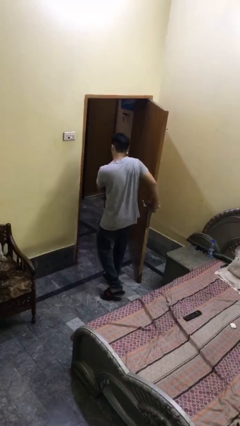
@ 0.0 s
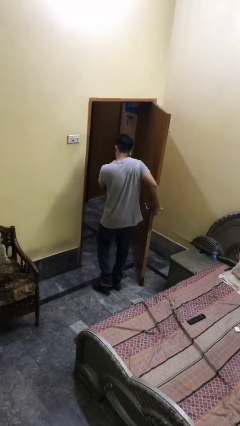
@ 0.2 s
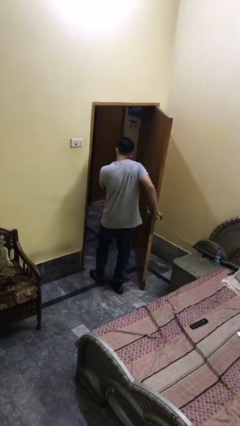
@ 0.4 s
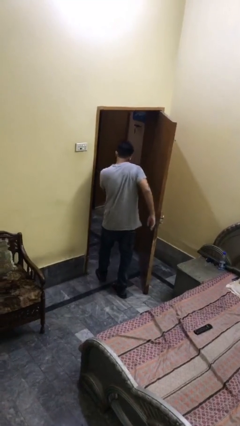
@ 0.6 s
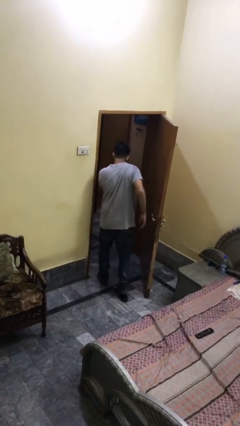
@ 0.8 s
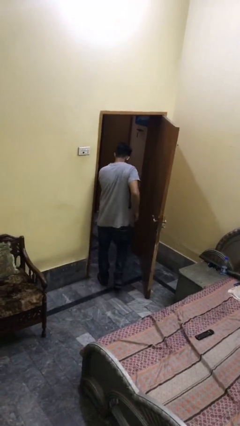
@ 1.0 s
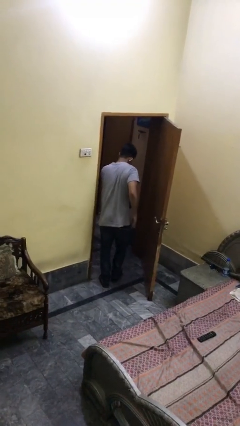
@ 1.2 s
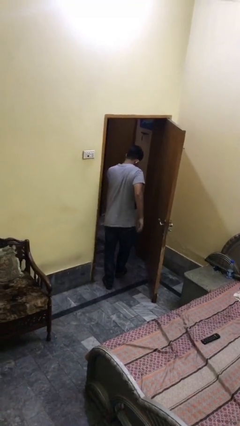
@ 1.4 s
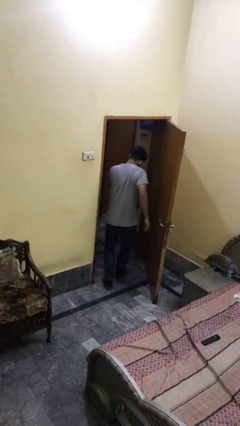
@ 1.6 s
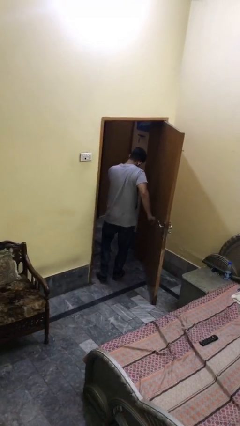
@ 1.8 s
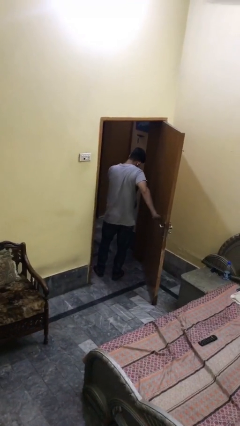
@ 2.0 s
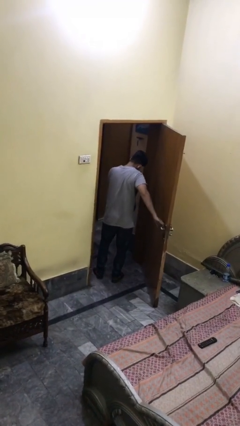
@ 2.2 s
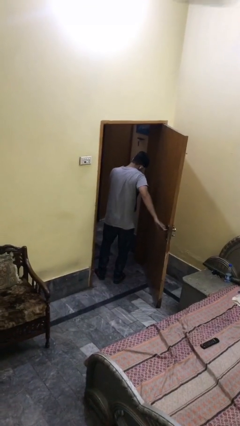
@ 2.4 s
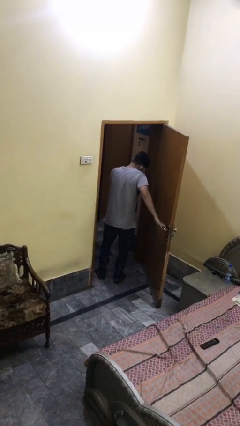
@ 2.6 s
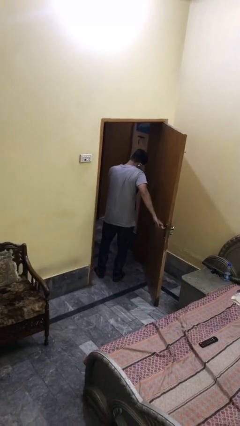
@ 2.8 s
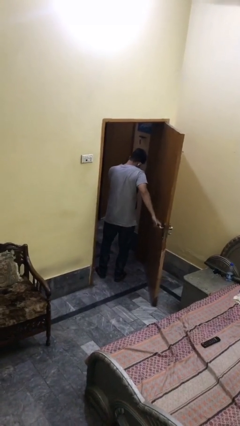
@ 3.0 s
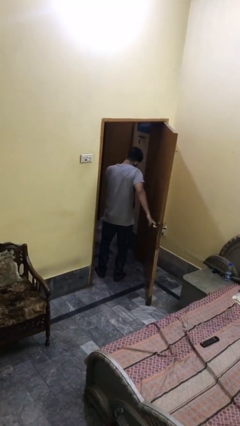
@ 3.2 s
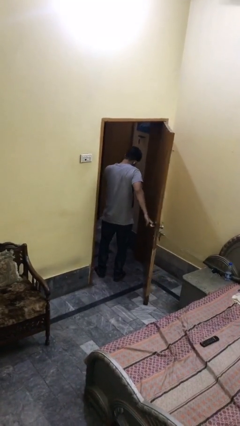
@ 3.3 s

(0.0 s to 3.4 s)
person exits scene through structure

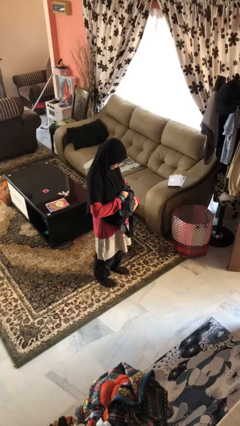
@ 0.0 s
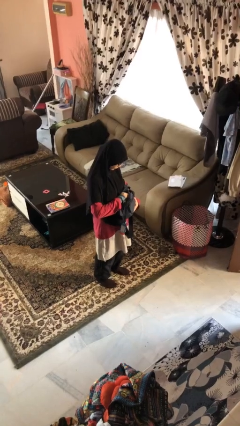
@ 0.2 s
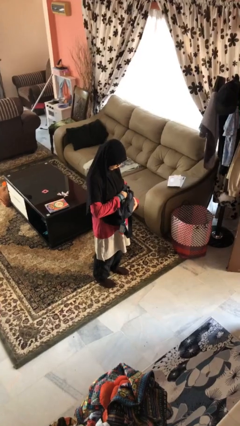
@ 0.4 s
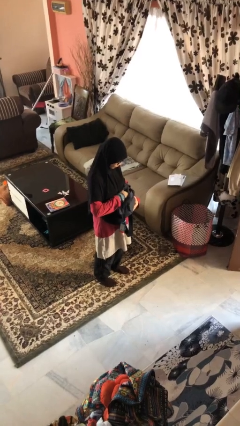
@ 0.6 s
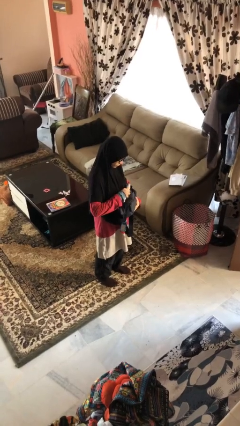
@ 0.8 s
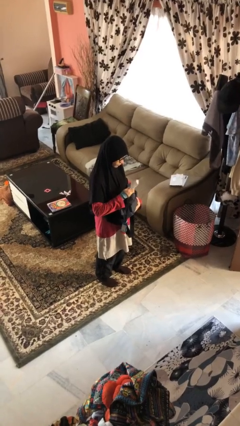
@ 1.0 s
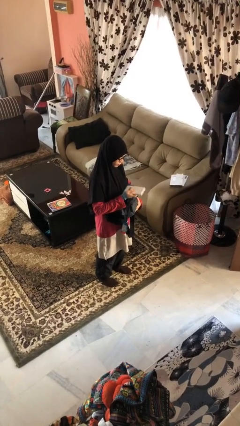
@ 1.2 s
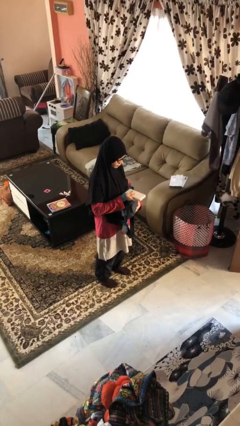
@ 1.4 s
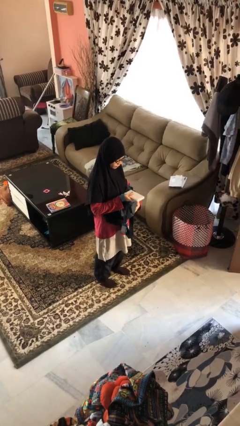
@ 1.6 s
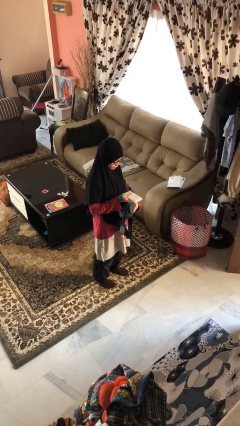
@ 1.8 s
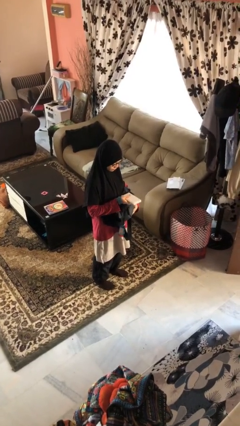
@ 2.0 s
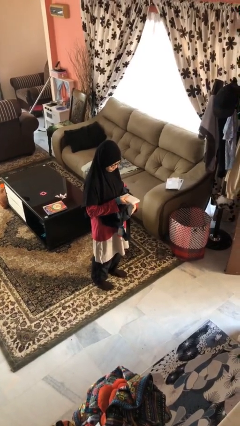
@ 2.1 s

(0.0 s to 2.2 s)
person takes object from purse

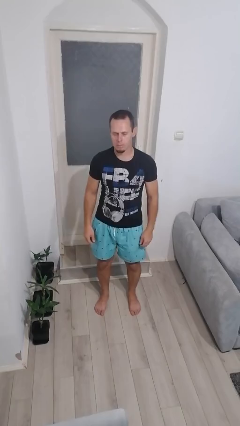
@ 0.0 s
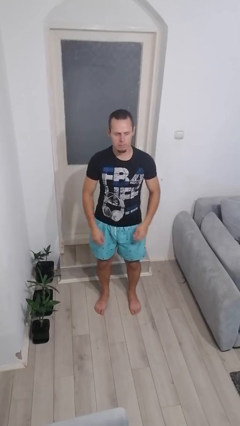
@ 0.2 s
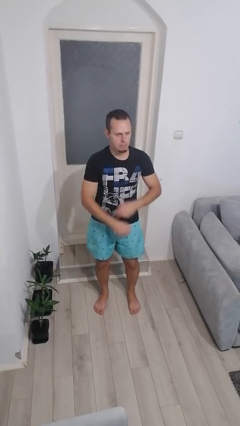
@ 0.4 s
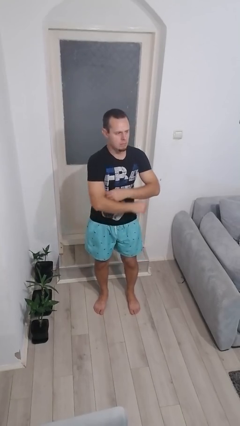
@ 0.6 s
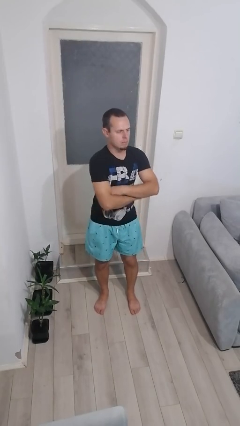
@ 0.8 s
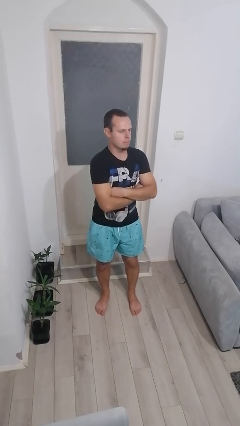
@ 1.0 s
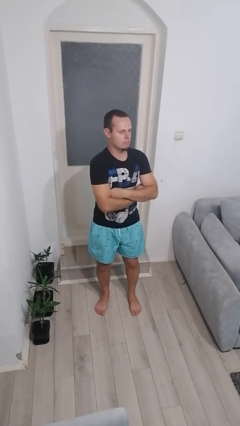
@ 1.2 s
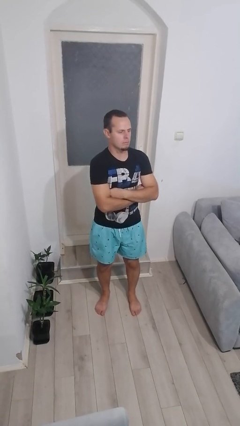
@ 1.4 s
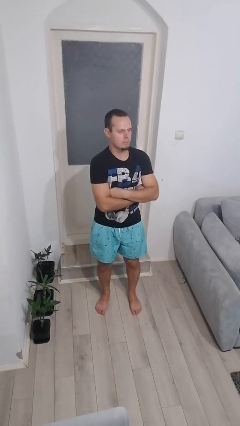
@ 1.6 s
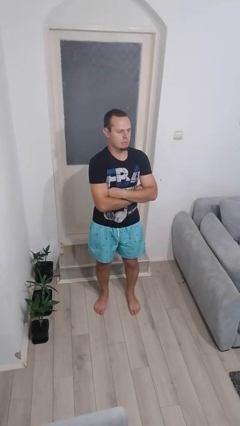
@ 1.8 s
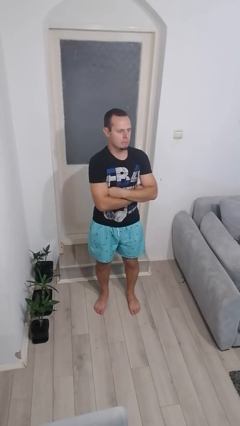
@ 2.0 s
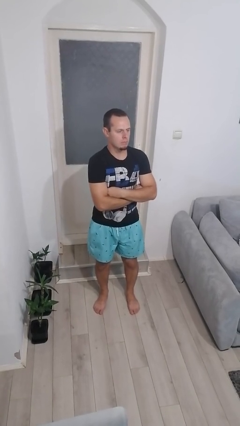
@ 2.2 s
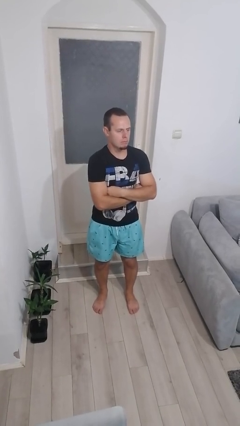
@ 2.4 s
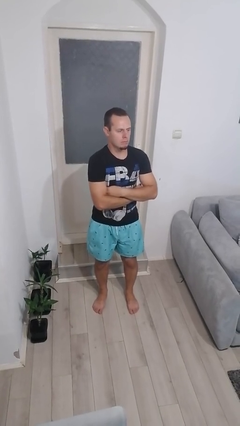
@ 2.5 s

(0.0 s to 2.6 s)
person crosses arms

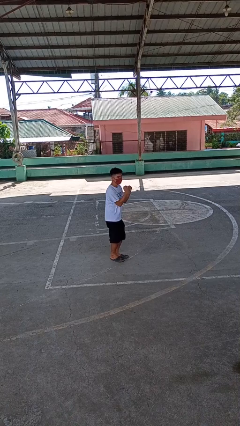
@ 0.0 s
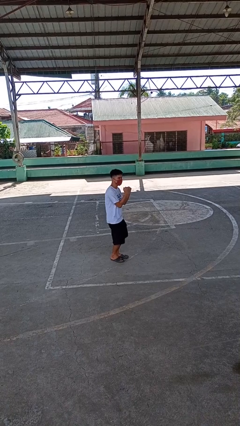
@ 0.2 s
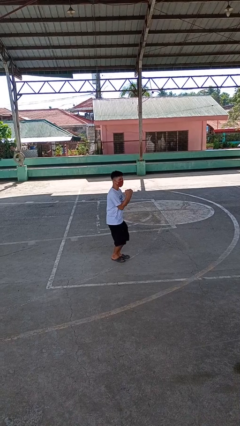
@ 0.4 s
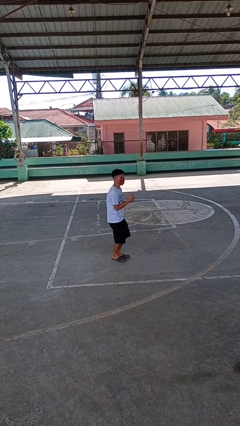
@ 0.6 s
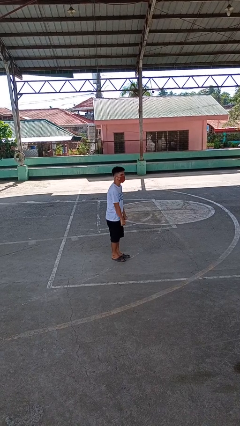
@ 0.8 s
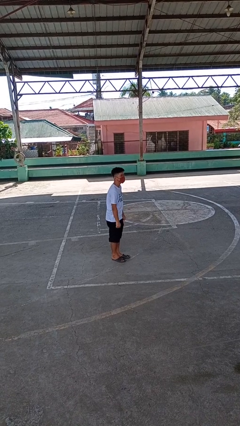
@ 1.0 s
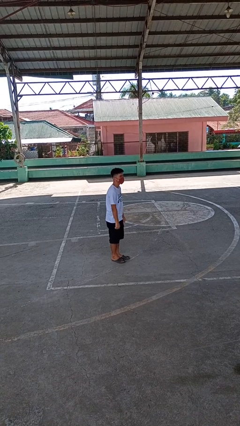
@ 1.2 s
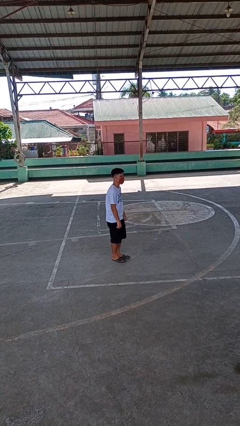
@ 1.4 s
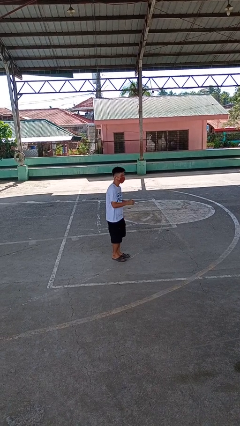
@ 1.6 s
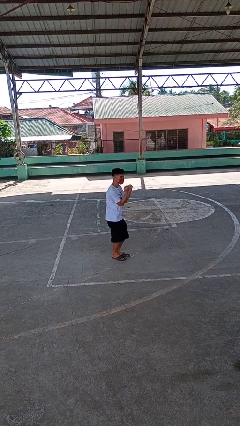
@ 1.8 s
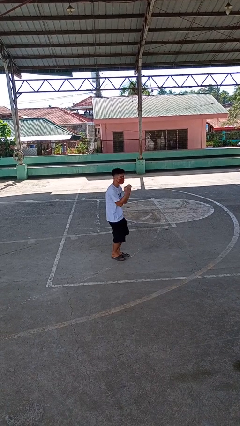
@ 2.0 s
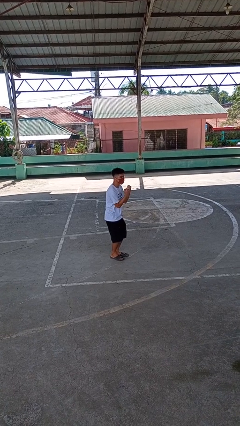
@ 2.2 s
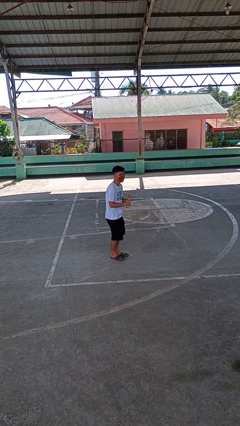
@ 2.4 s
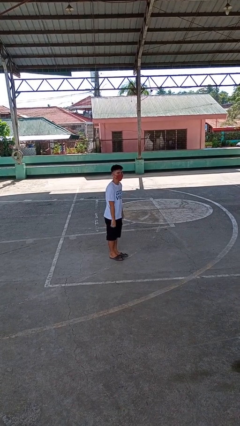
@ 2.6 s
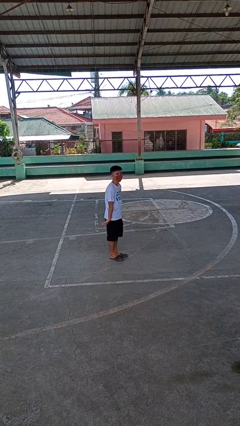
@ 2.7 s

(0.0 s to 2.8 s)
person dances in place

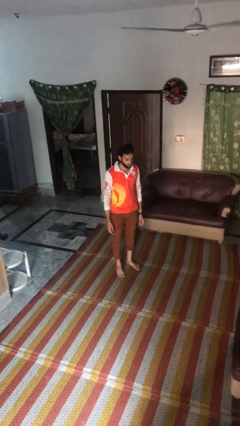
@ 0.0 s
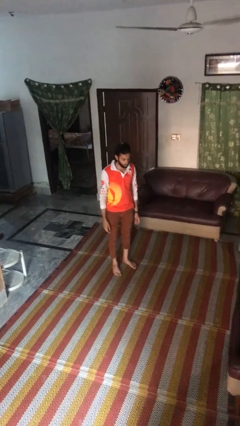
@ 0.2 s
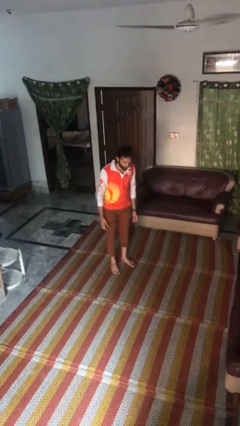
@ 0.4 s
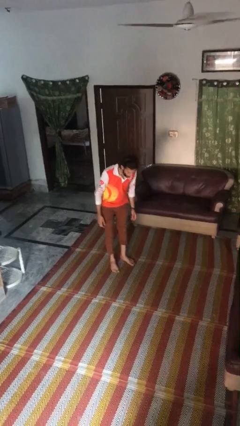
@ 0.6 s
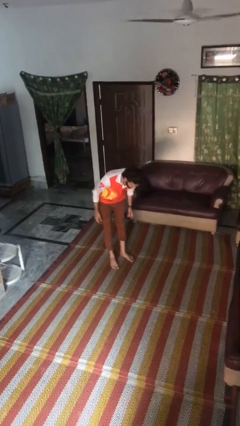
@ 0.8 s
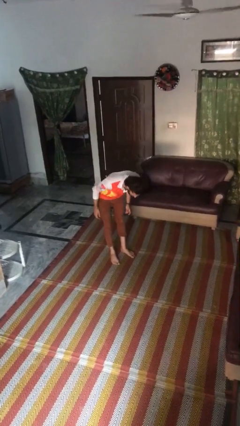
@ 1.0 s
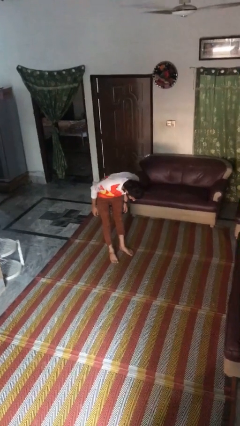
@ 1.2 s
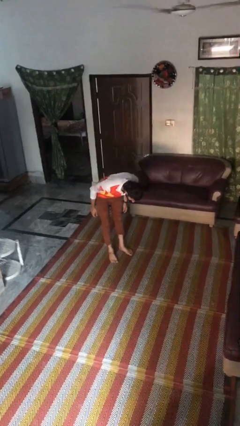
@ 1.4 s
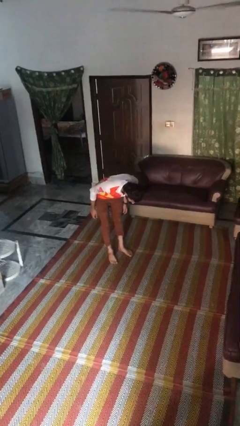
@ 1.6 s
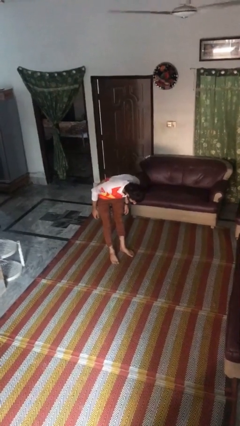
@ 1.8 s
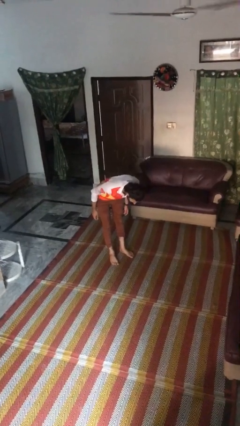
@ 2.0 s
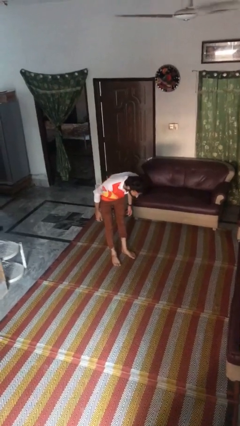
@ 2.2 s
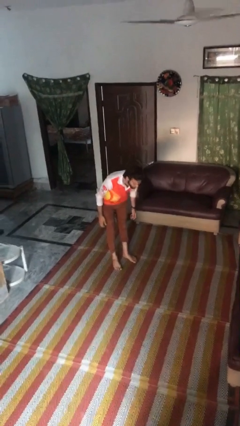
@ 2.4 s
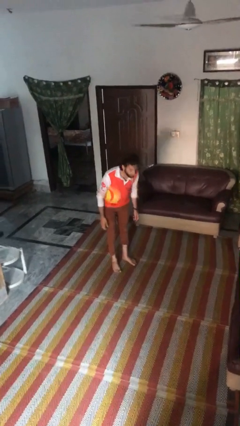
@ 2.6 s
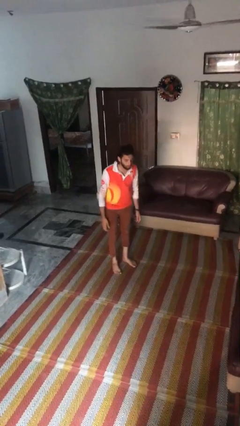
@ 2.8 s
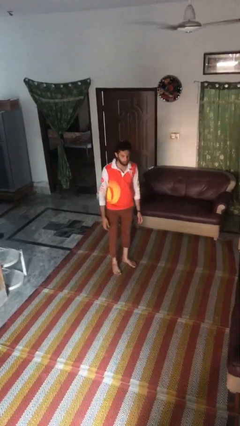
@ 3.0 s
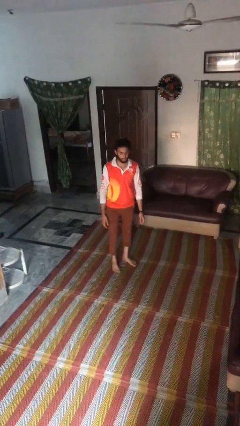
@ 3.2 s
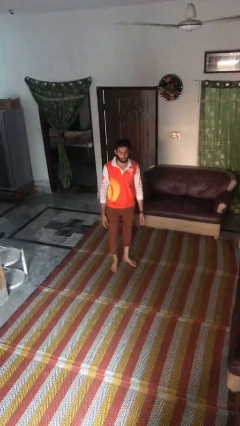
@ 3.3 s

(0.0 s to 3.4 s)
person bows

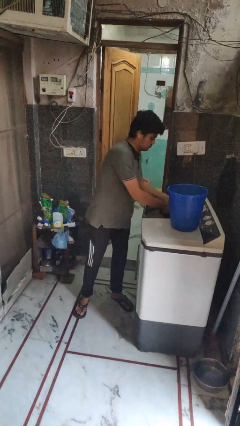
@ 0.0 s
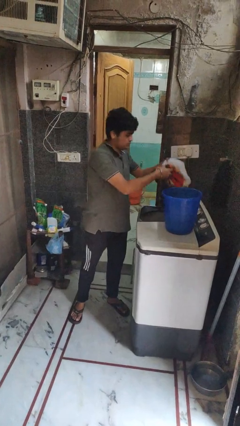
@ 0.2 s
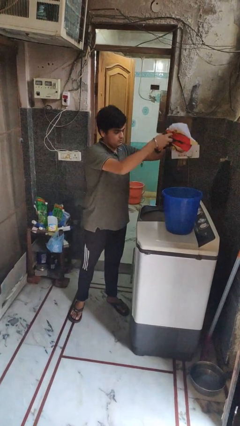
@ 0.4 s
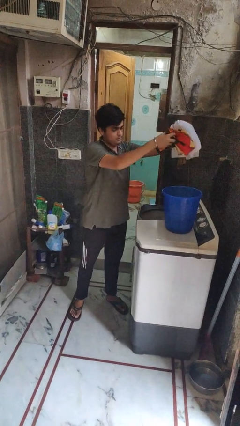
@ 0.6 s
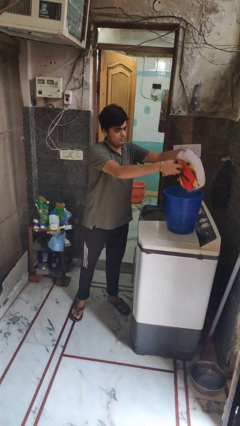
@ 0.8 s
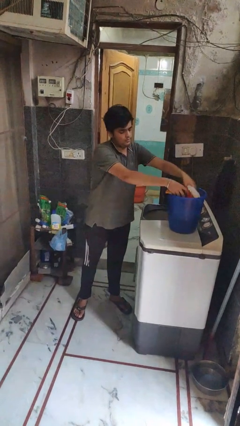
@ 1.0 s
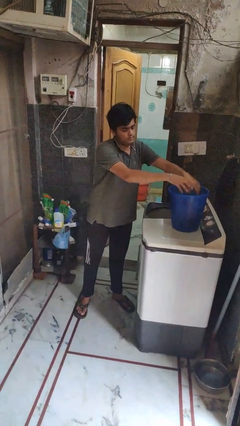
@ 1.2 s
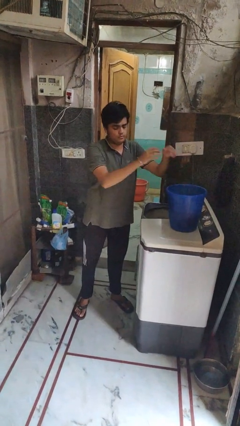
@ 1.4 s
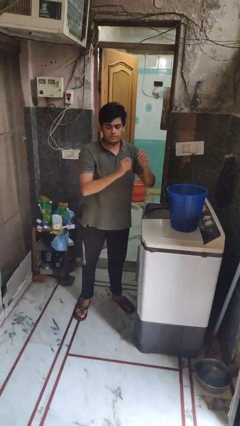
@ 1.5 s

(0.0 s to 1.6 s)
person unloads clotheswasher

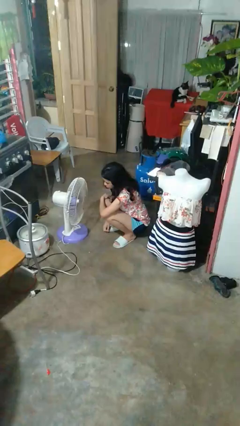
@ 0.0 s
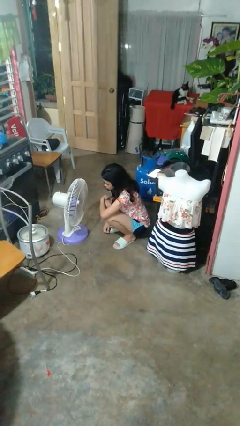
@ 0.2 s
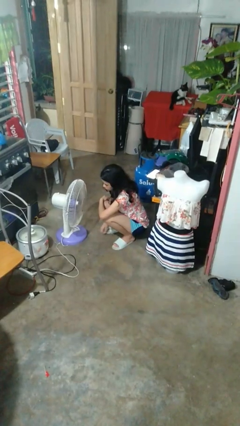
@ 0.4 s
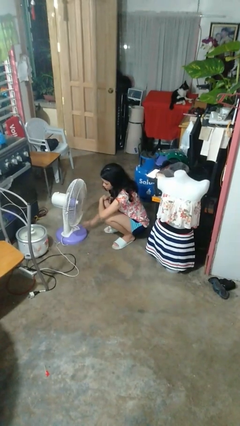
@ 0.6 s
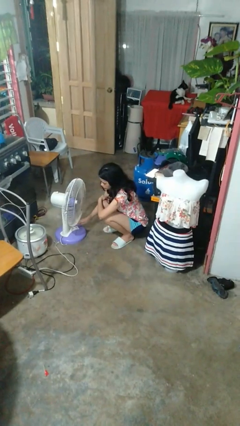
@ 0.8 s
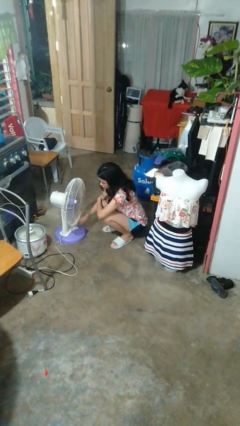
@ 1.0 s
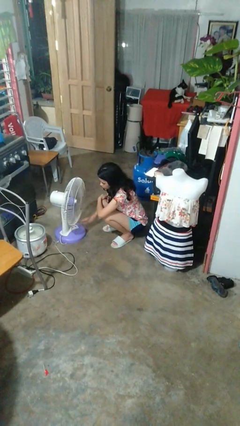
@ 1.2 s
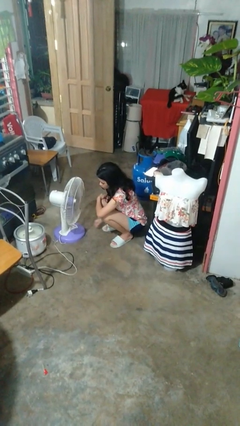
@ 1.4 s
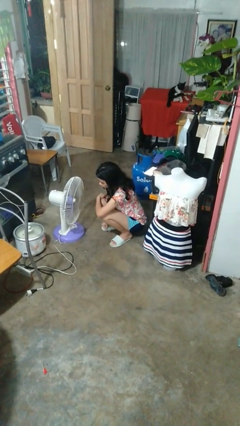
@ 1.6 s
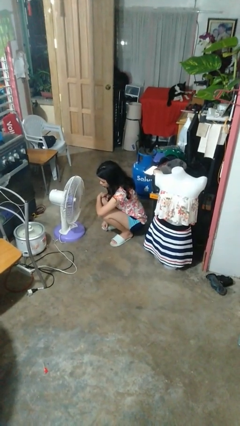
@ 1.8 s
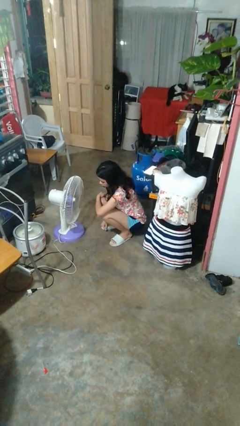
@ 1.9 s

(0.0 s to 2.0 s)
person turns on fan
